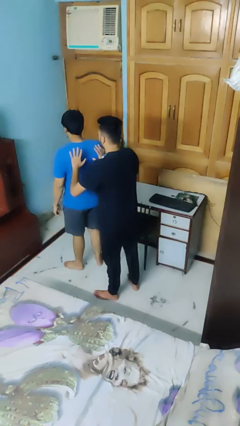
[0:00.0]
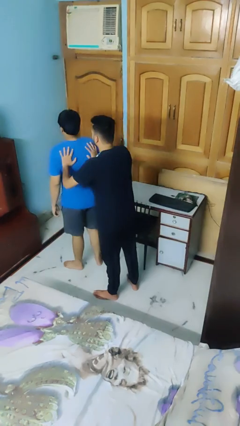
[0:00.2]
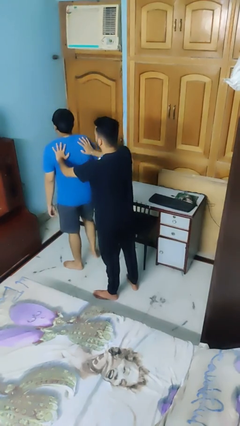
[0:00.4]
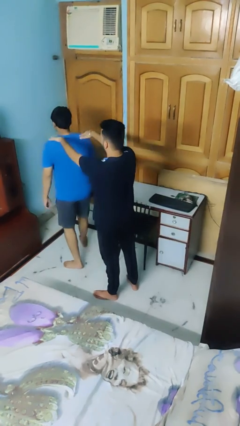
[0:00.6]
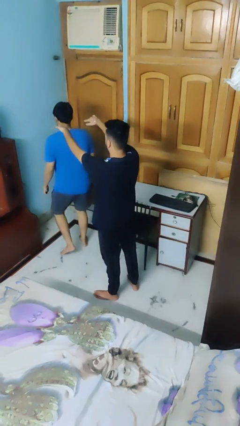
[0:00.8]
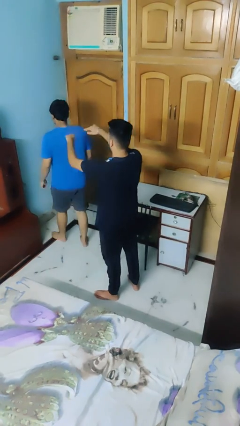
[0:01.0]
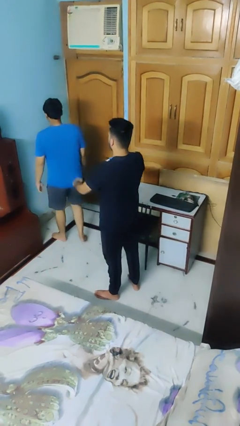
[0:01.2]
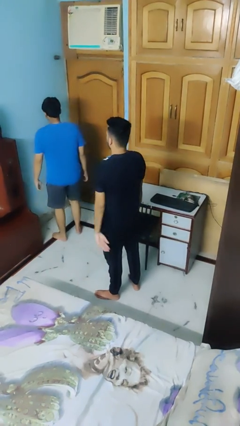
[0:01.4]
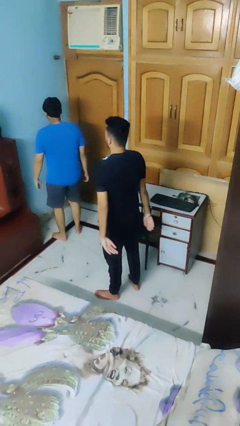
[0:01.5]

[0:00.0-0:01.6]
person shoves person

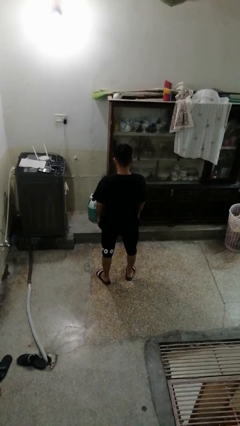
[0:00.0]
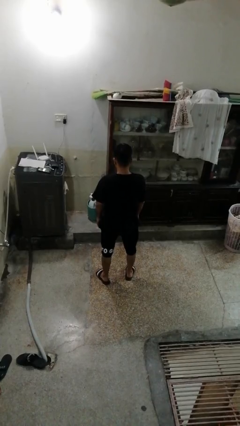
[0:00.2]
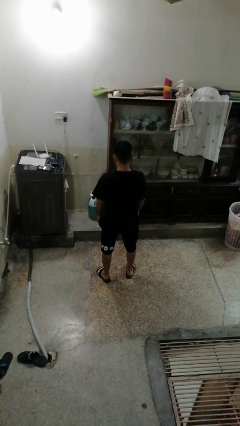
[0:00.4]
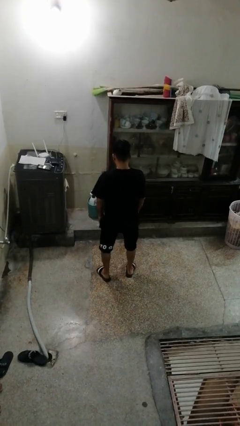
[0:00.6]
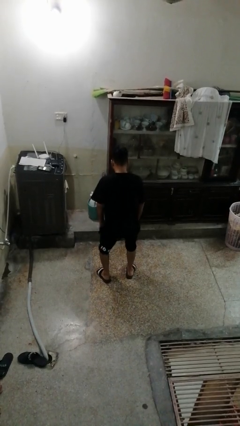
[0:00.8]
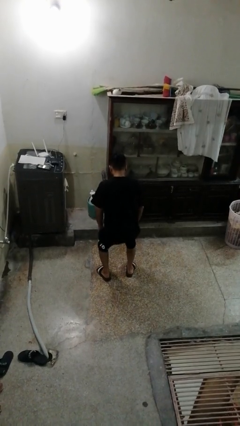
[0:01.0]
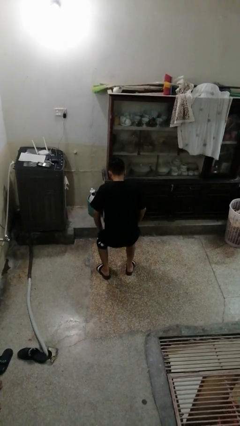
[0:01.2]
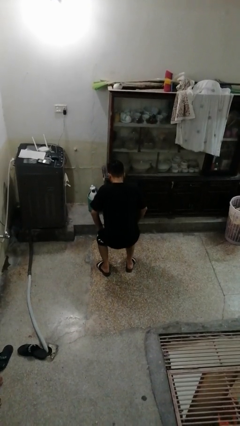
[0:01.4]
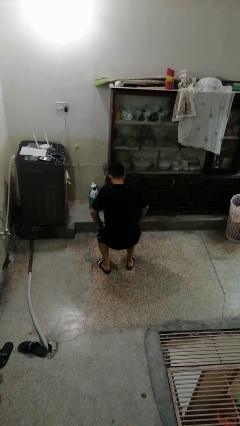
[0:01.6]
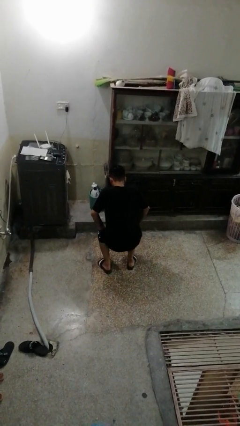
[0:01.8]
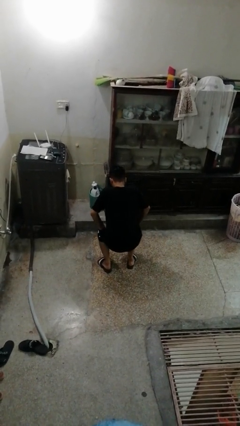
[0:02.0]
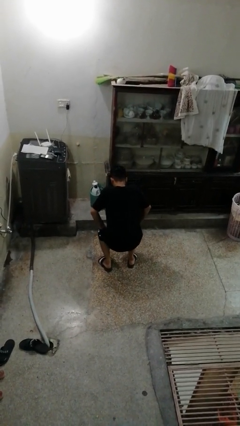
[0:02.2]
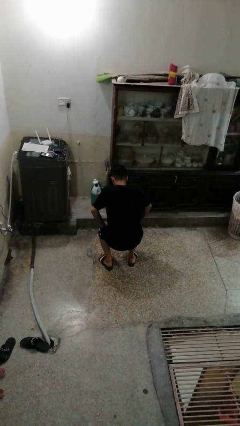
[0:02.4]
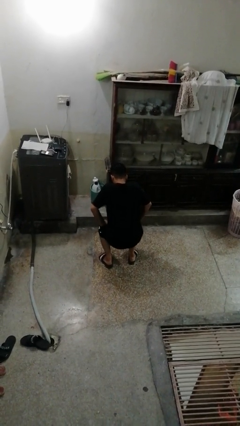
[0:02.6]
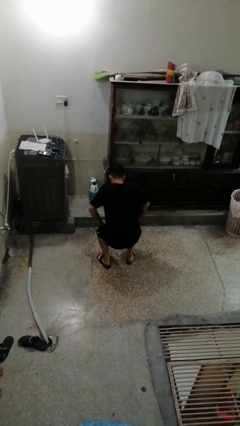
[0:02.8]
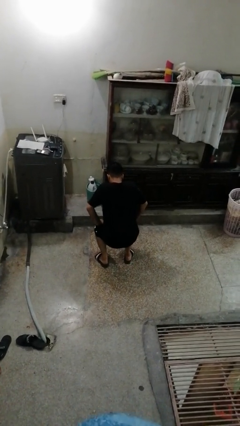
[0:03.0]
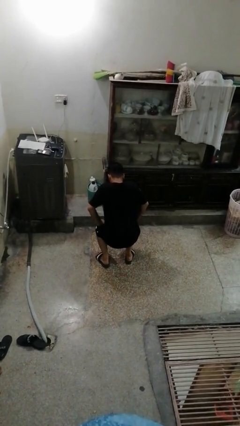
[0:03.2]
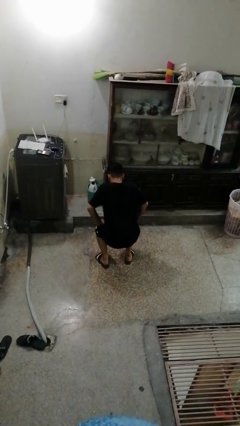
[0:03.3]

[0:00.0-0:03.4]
person squats

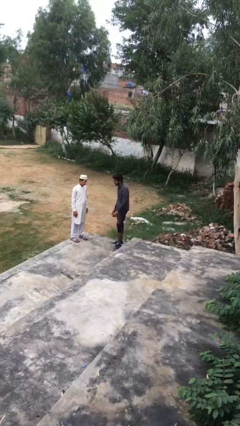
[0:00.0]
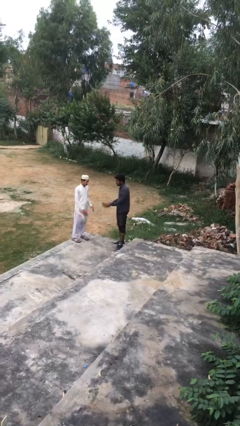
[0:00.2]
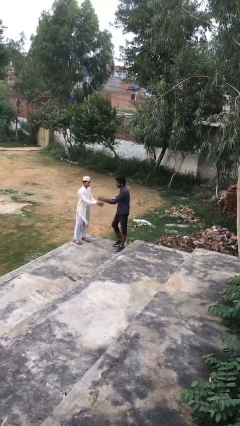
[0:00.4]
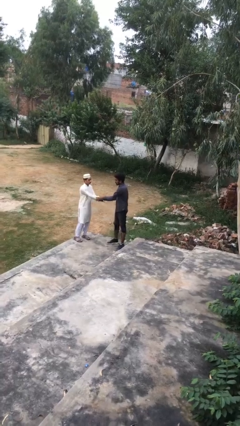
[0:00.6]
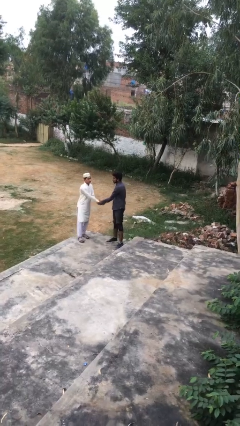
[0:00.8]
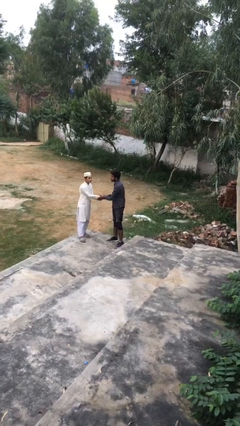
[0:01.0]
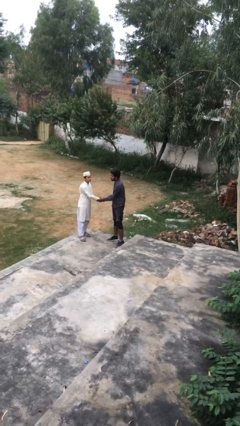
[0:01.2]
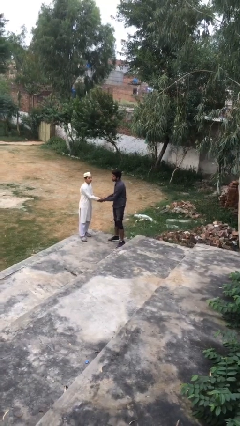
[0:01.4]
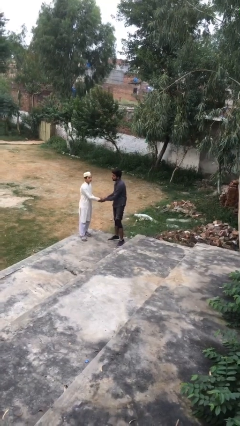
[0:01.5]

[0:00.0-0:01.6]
person shakes hand

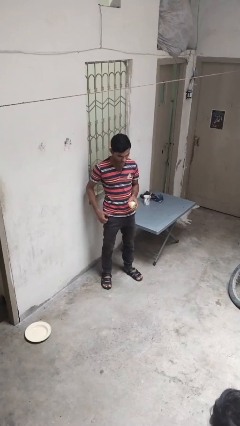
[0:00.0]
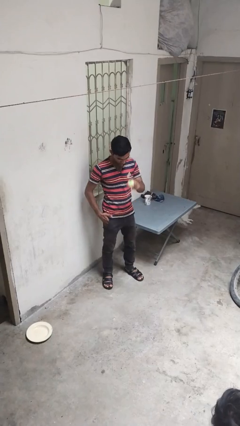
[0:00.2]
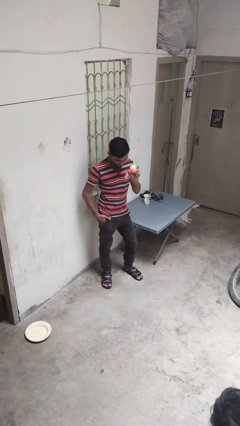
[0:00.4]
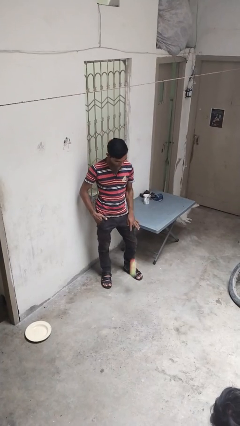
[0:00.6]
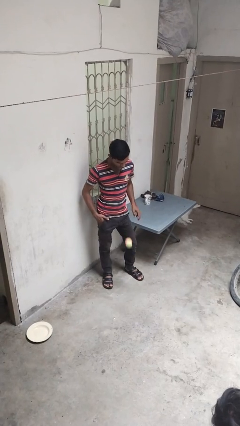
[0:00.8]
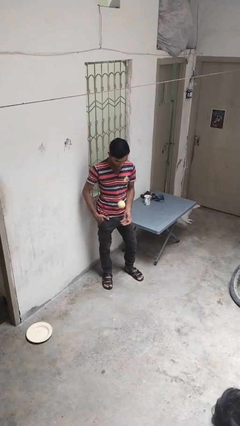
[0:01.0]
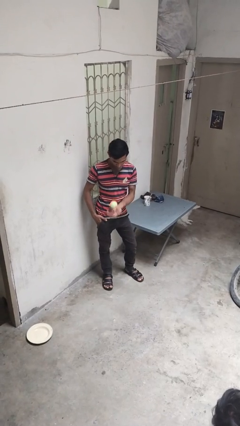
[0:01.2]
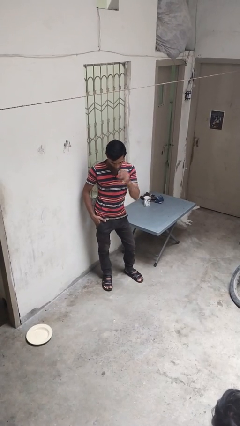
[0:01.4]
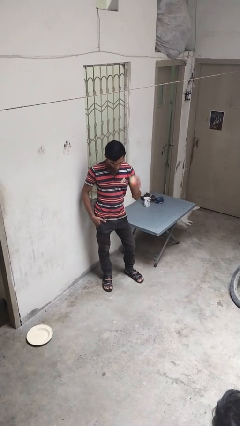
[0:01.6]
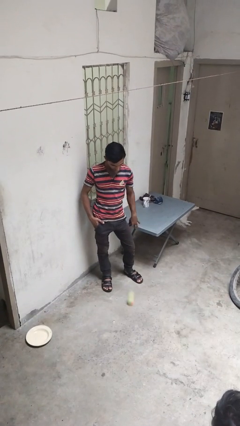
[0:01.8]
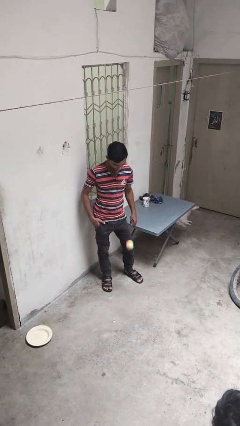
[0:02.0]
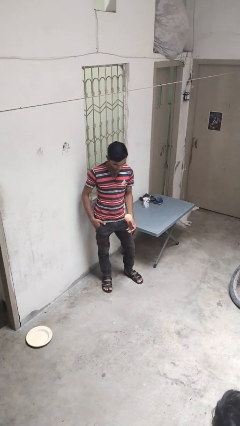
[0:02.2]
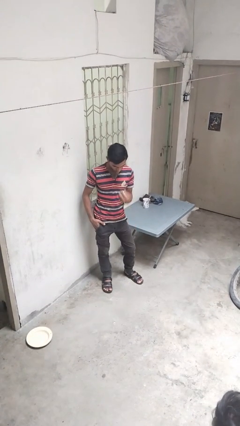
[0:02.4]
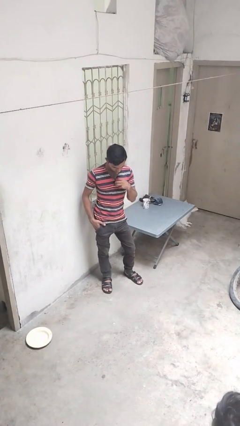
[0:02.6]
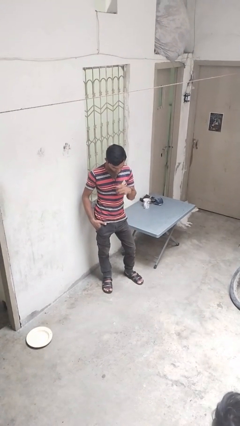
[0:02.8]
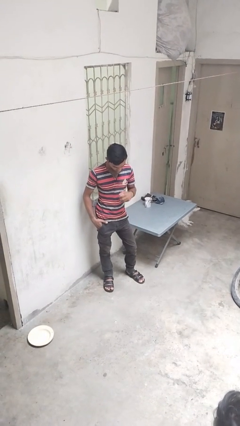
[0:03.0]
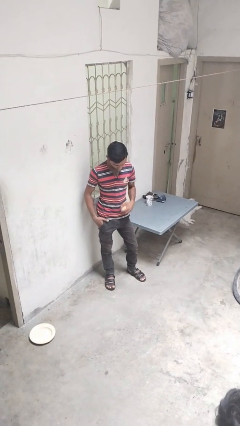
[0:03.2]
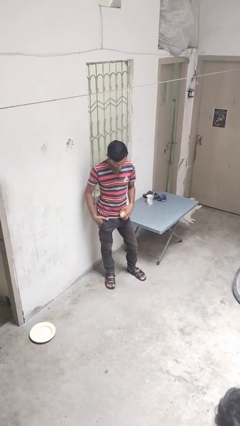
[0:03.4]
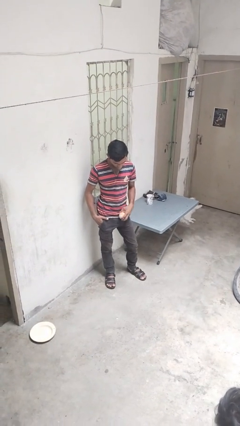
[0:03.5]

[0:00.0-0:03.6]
person bounces ball on floor

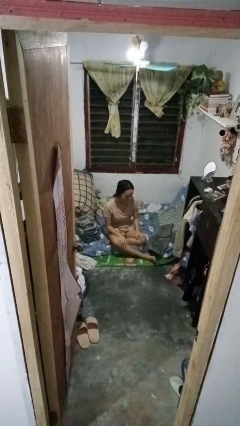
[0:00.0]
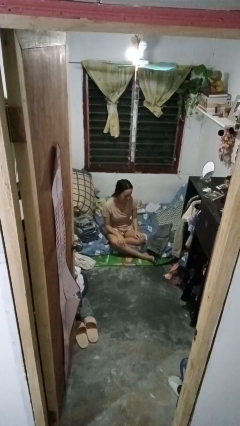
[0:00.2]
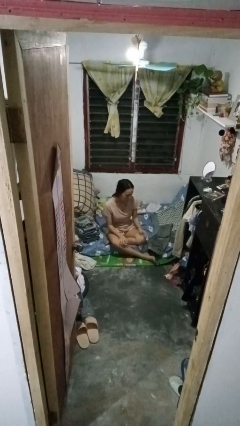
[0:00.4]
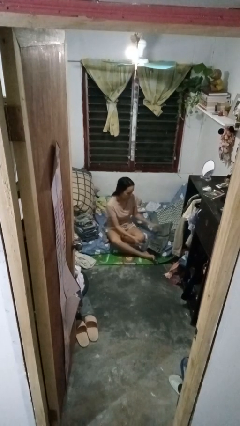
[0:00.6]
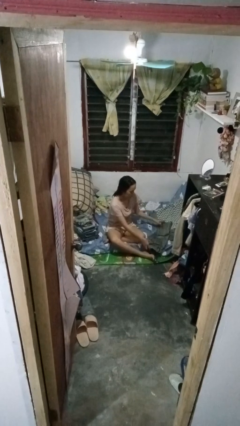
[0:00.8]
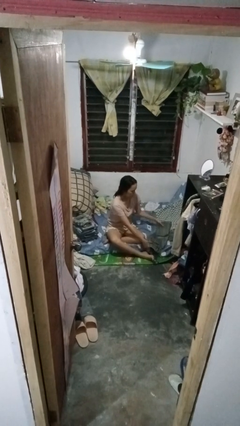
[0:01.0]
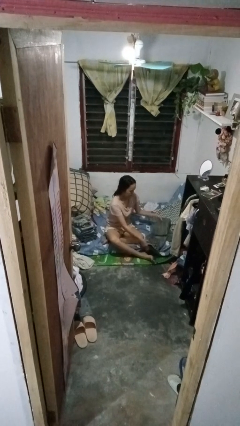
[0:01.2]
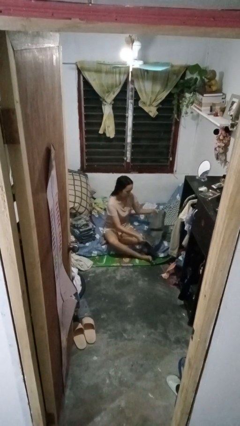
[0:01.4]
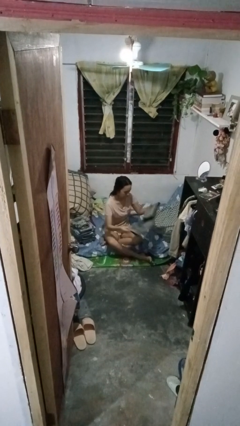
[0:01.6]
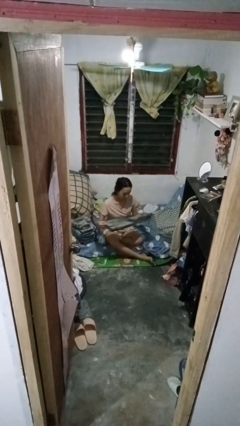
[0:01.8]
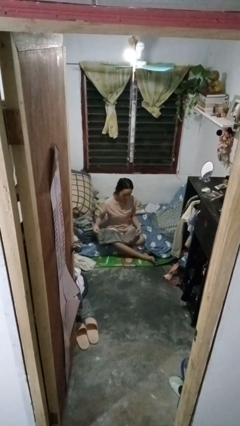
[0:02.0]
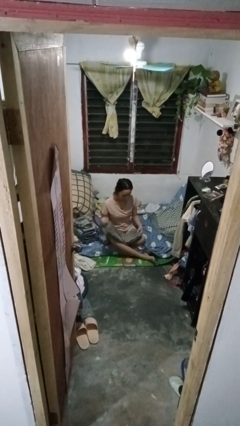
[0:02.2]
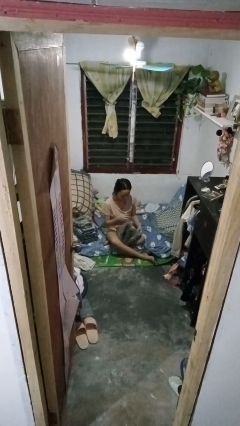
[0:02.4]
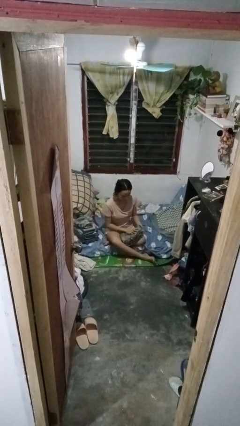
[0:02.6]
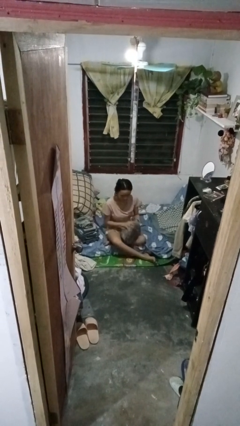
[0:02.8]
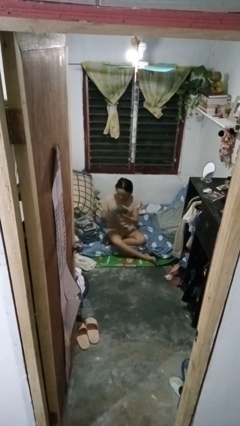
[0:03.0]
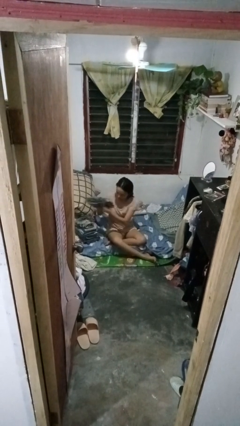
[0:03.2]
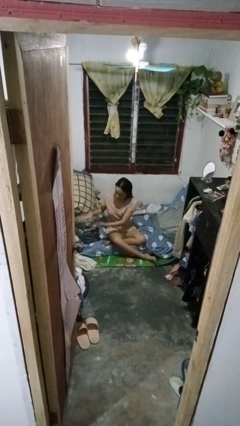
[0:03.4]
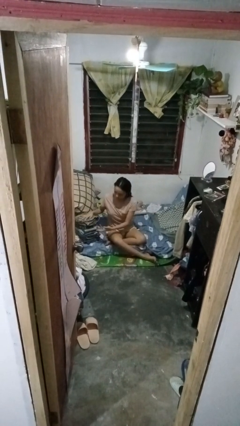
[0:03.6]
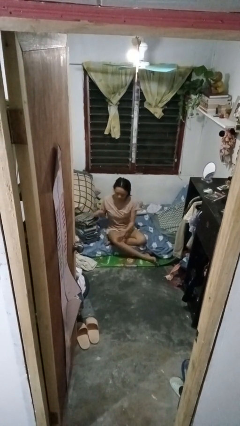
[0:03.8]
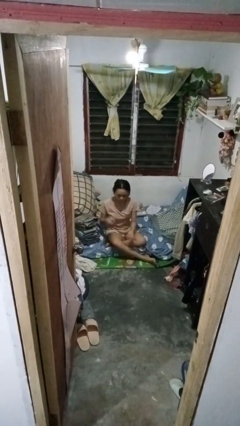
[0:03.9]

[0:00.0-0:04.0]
person folds pants

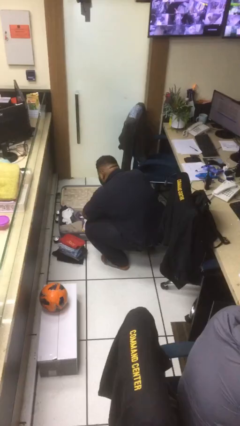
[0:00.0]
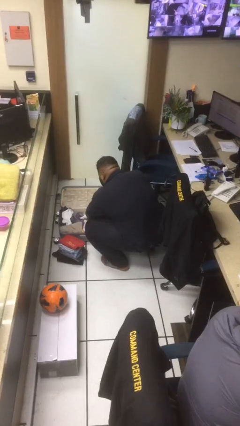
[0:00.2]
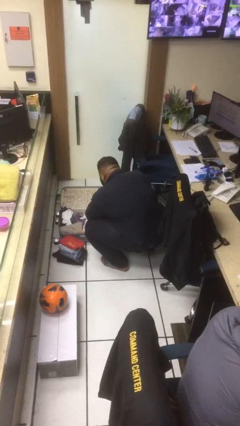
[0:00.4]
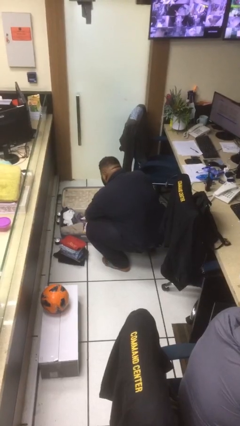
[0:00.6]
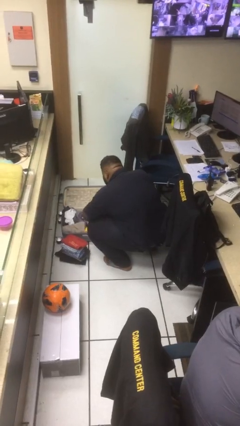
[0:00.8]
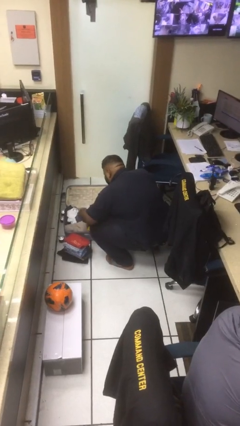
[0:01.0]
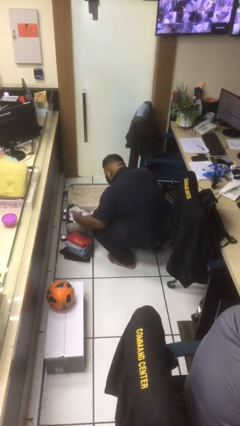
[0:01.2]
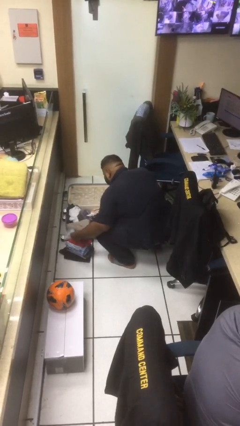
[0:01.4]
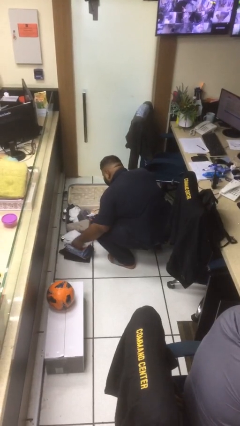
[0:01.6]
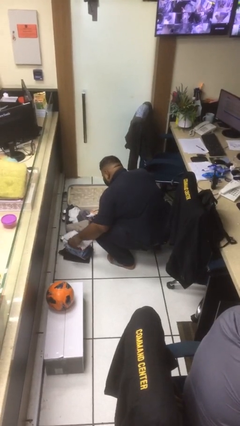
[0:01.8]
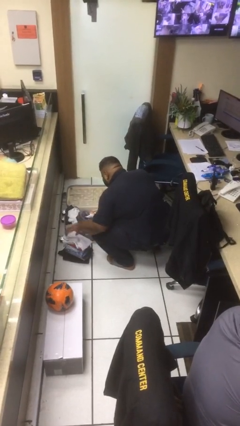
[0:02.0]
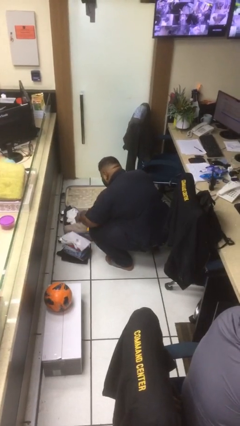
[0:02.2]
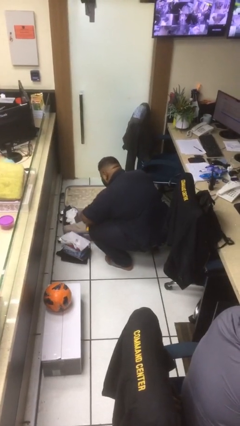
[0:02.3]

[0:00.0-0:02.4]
person unloads clothes from suitcase

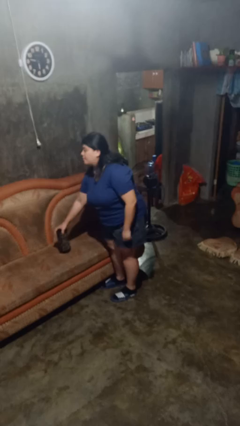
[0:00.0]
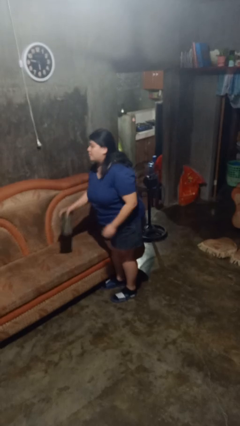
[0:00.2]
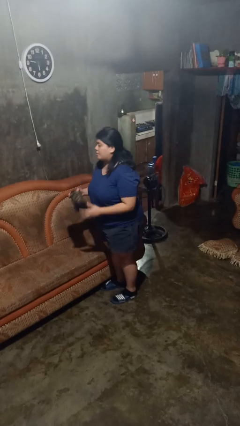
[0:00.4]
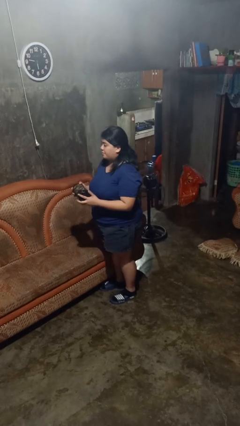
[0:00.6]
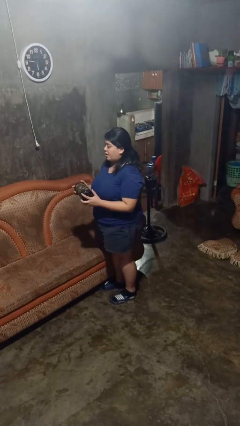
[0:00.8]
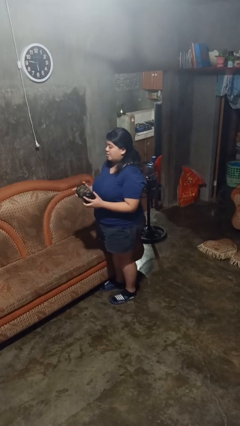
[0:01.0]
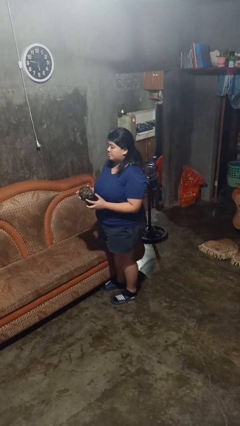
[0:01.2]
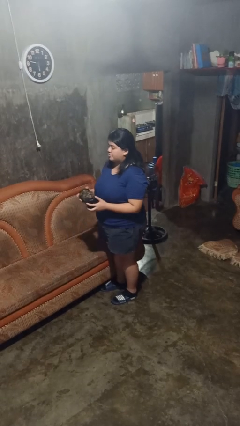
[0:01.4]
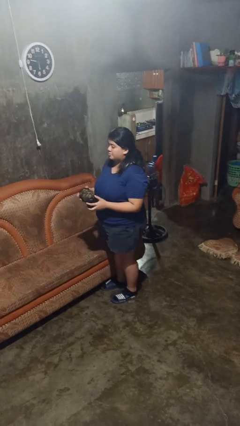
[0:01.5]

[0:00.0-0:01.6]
person picks up object from couch
